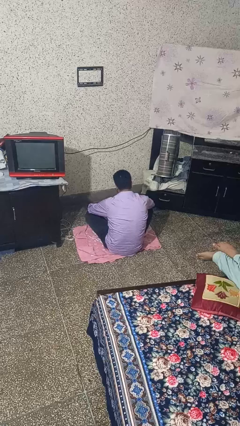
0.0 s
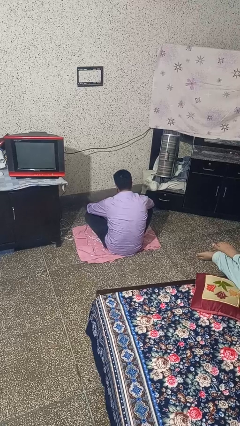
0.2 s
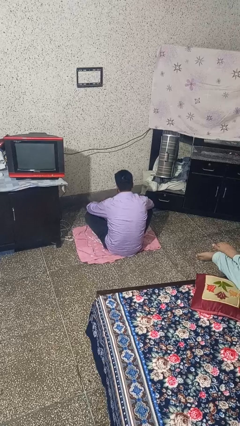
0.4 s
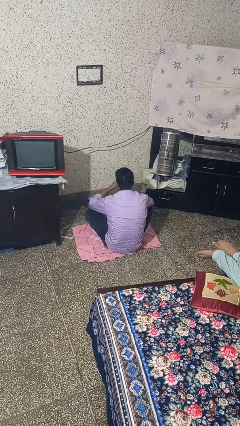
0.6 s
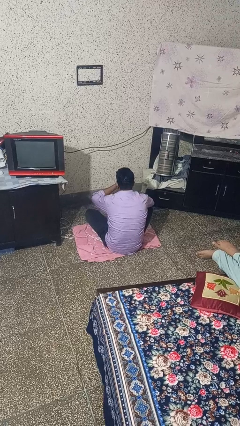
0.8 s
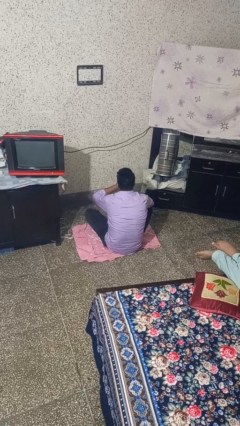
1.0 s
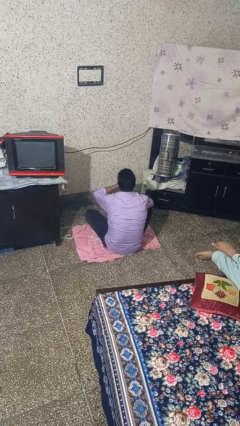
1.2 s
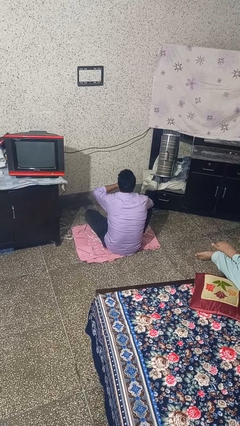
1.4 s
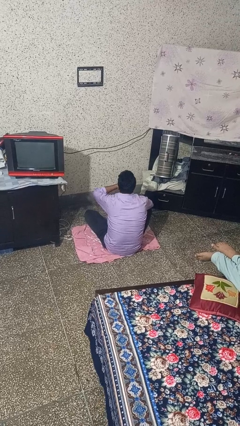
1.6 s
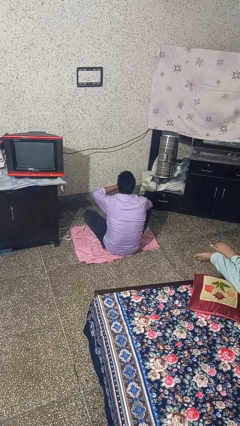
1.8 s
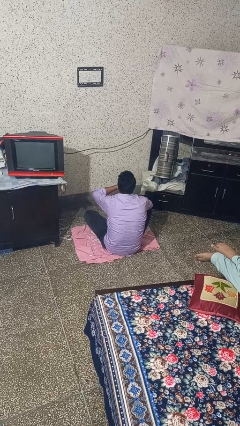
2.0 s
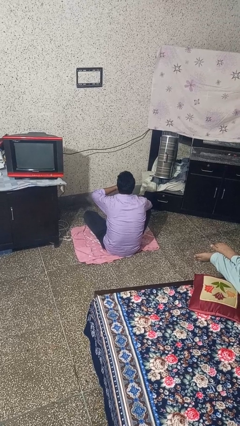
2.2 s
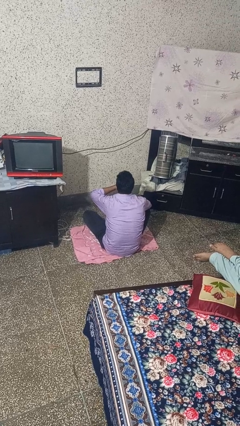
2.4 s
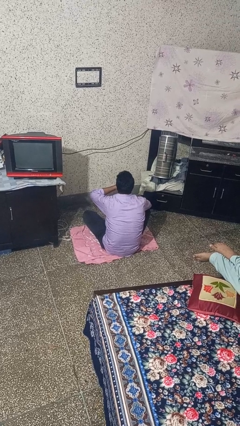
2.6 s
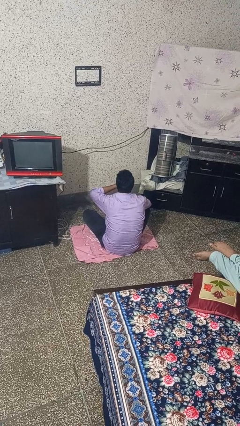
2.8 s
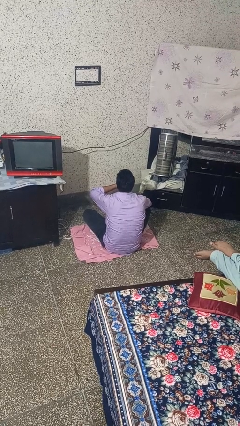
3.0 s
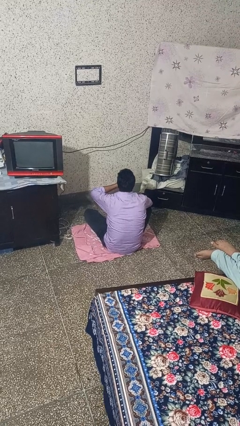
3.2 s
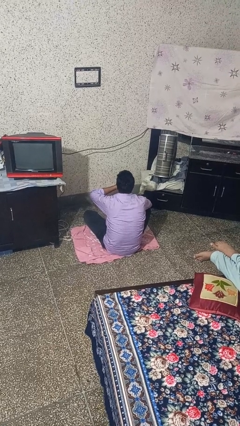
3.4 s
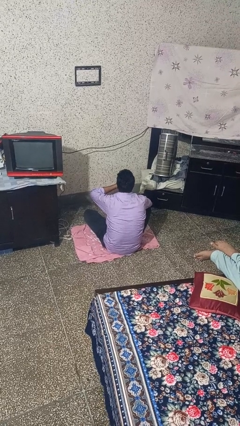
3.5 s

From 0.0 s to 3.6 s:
person yawns

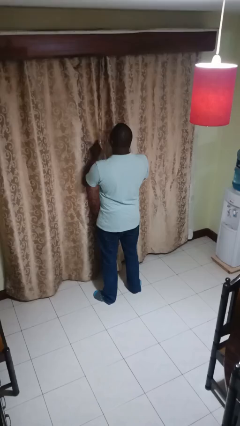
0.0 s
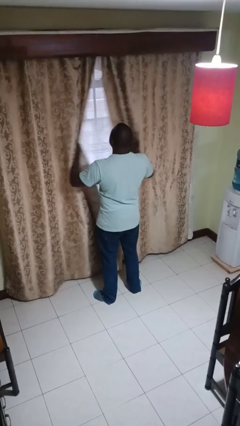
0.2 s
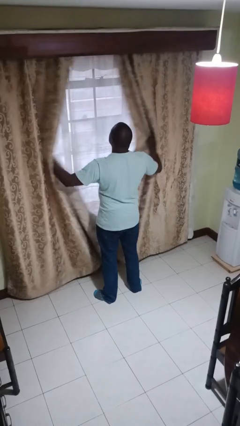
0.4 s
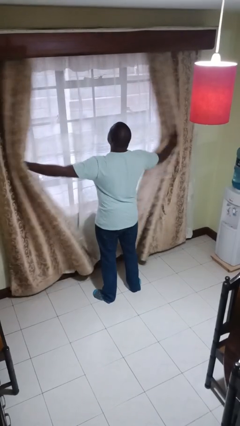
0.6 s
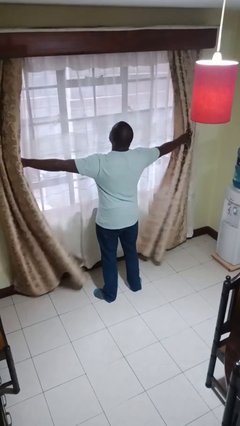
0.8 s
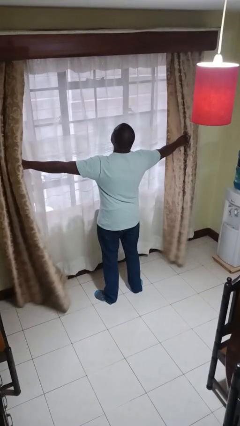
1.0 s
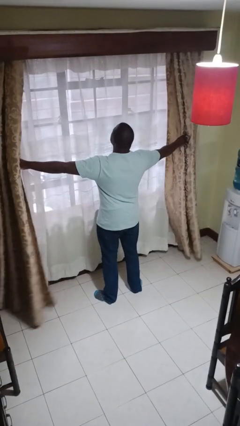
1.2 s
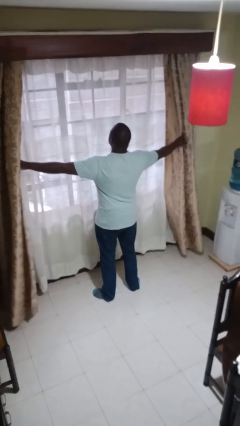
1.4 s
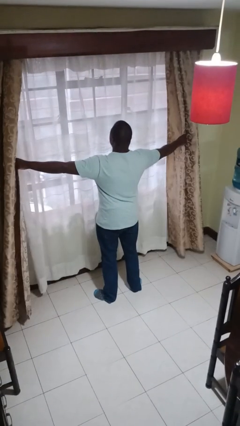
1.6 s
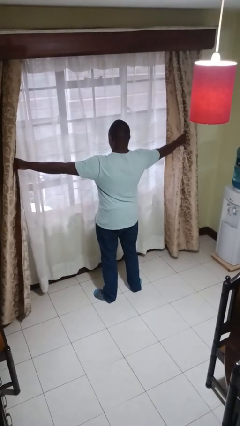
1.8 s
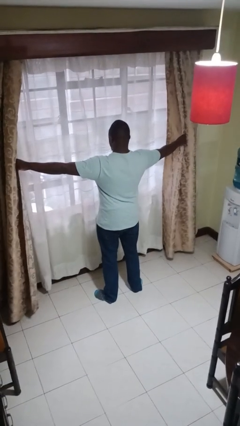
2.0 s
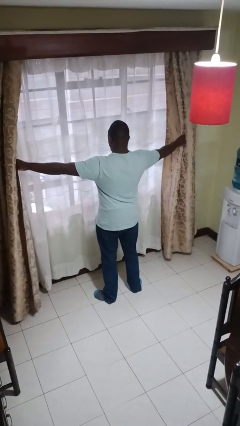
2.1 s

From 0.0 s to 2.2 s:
person opens curtains

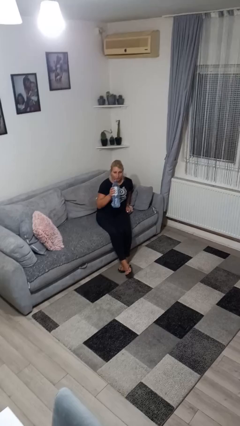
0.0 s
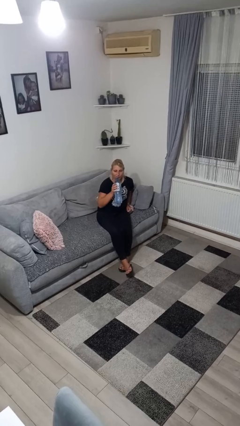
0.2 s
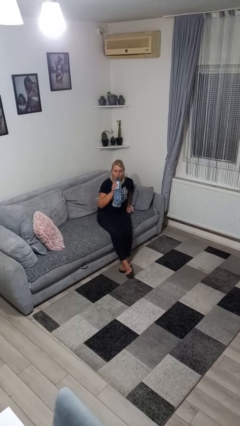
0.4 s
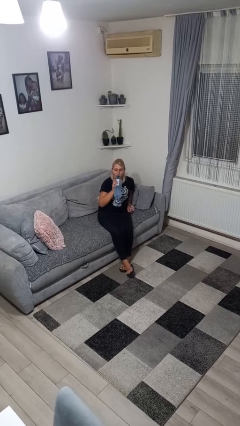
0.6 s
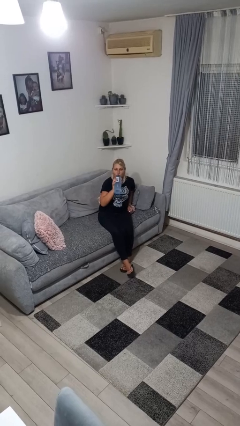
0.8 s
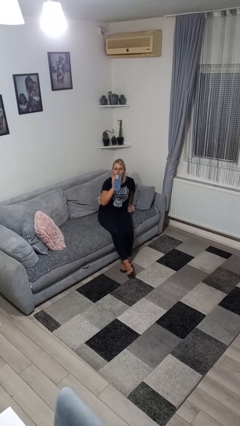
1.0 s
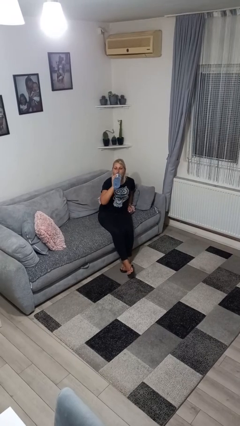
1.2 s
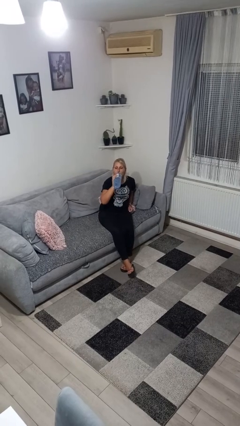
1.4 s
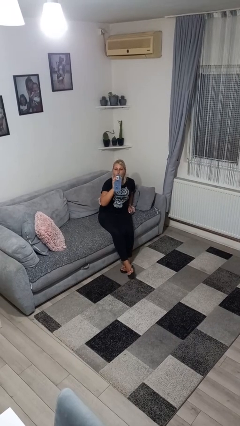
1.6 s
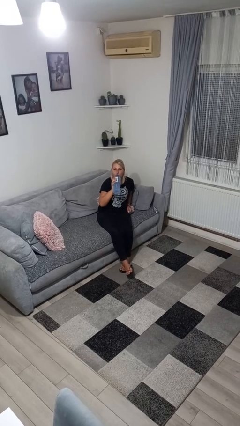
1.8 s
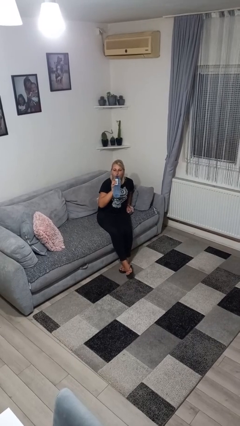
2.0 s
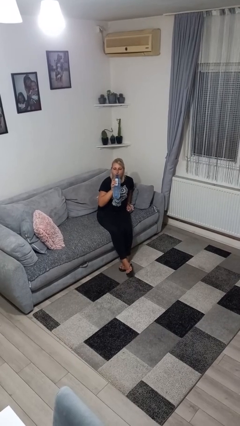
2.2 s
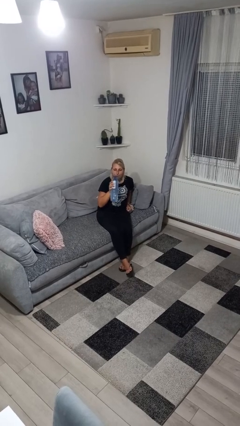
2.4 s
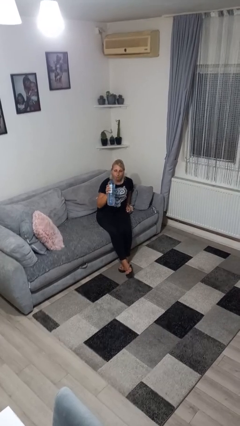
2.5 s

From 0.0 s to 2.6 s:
person drinks from bottle

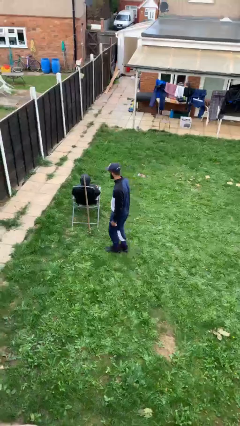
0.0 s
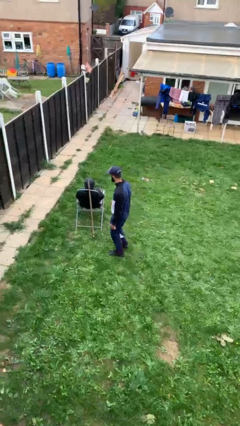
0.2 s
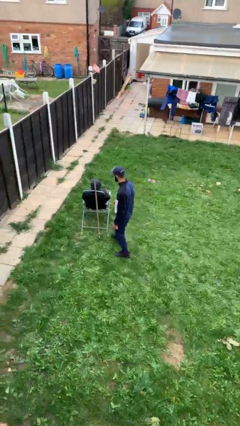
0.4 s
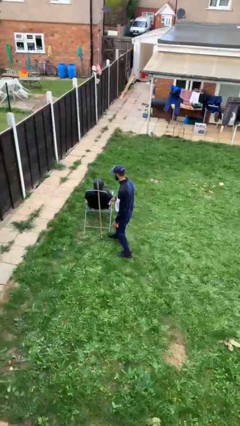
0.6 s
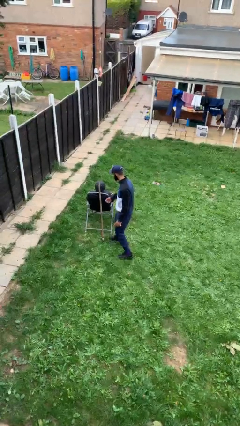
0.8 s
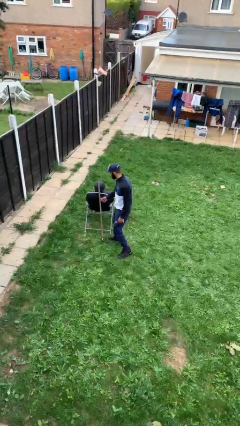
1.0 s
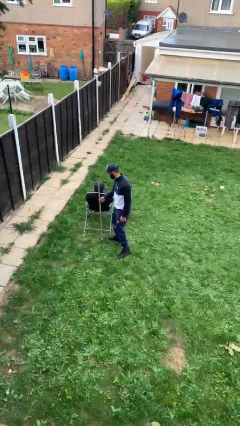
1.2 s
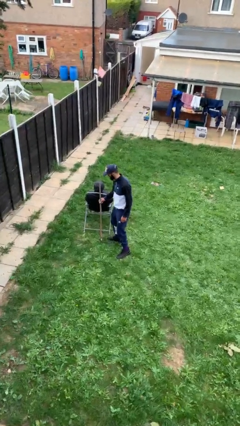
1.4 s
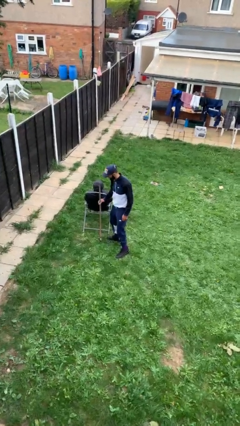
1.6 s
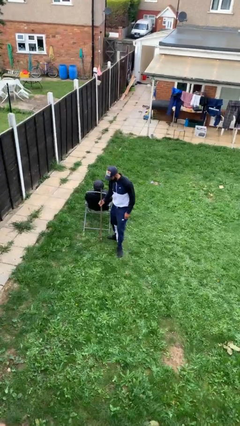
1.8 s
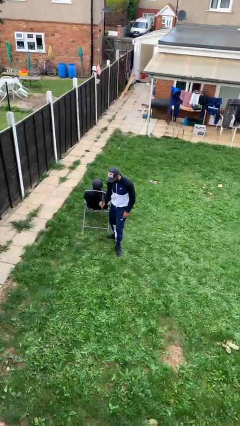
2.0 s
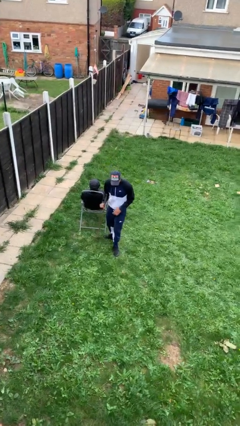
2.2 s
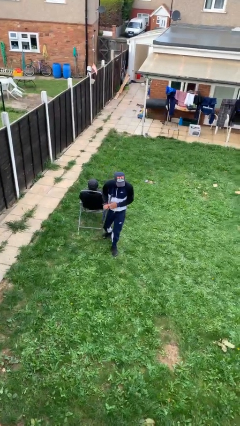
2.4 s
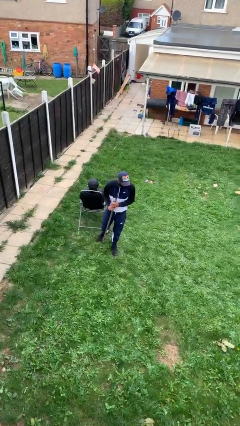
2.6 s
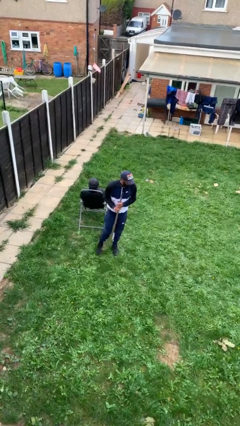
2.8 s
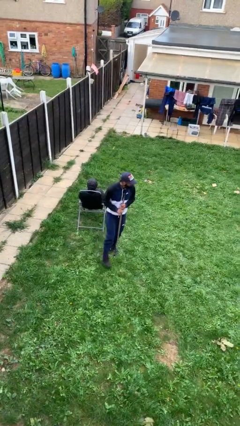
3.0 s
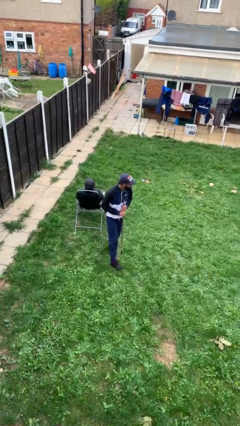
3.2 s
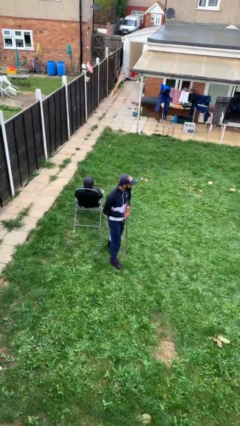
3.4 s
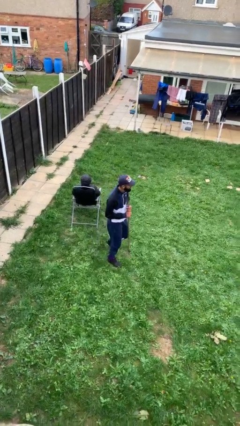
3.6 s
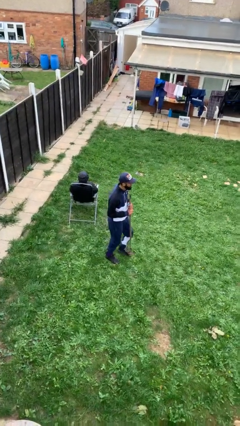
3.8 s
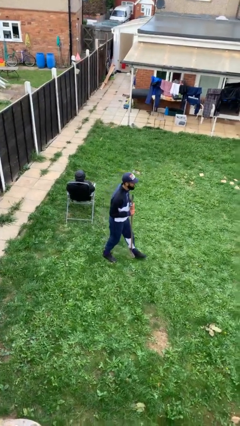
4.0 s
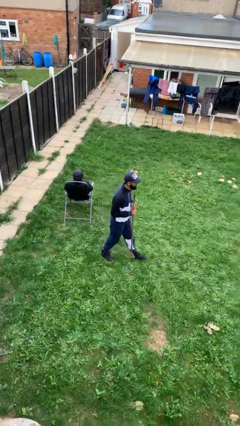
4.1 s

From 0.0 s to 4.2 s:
person steals object from person

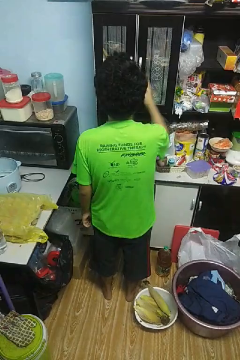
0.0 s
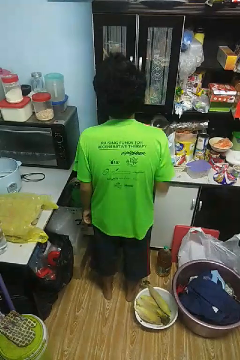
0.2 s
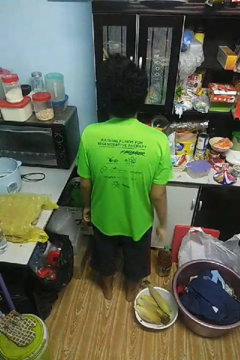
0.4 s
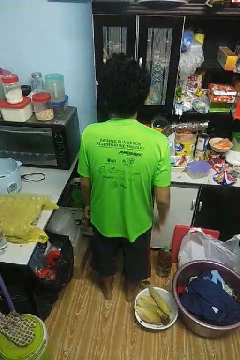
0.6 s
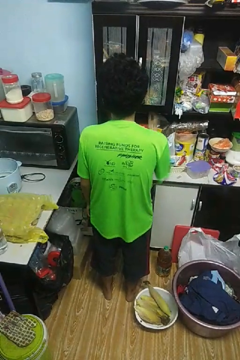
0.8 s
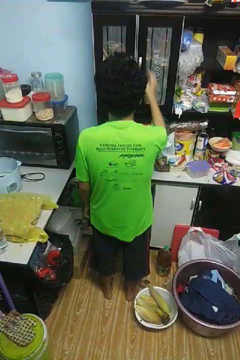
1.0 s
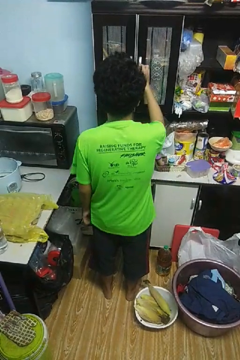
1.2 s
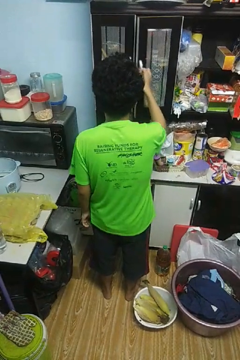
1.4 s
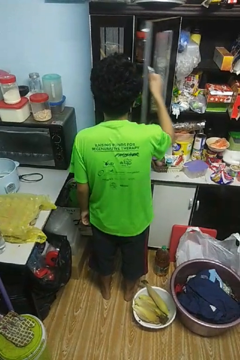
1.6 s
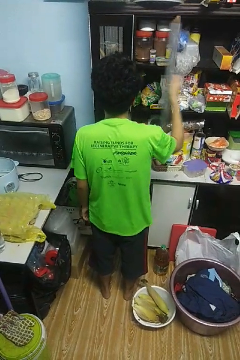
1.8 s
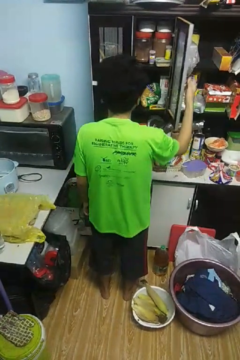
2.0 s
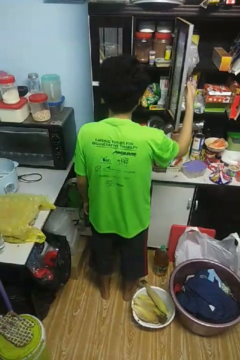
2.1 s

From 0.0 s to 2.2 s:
person opens cabinet

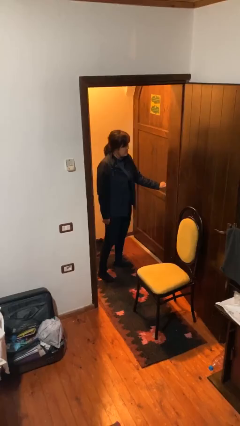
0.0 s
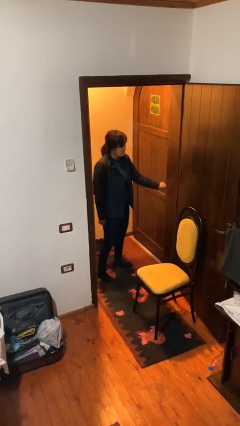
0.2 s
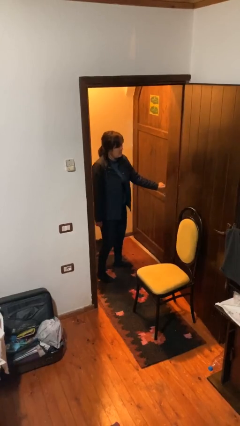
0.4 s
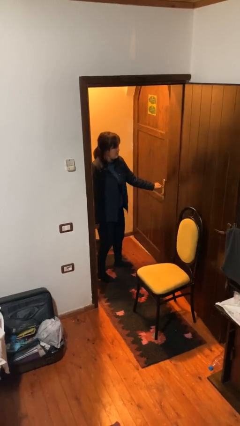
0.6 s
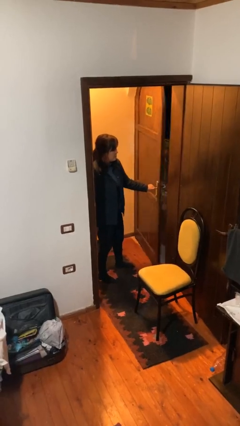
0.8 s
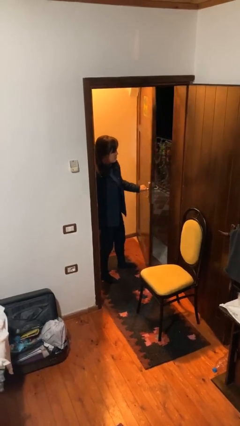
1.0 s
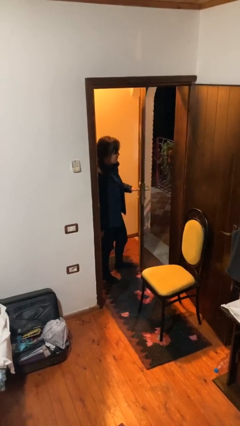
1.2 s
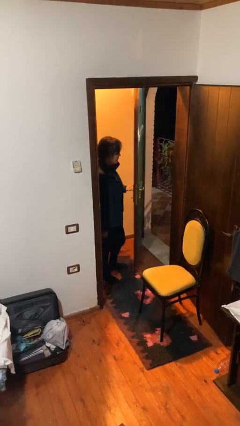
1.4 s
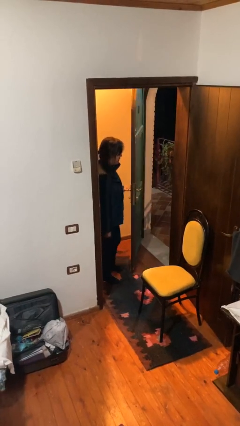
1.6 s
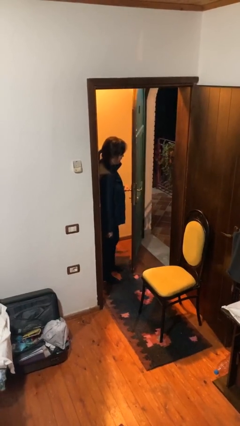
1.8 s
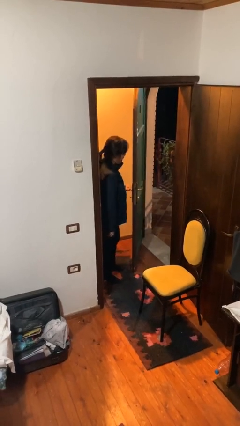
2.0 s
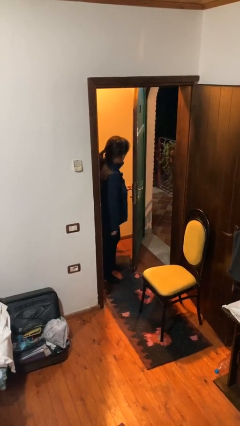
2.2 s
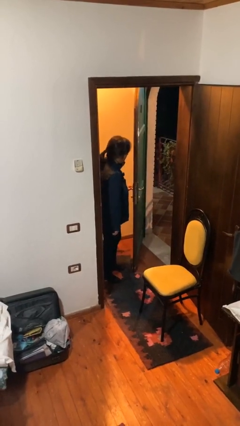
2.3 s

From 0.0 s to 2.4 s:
person opens facility door

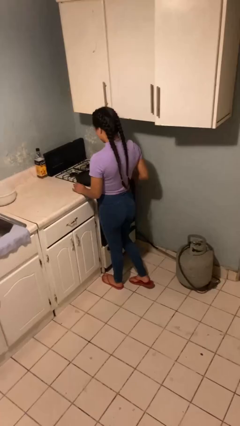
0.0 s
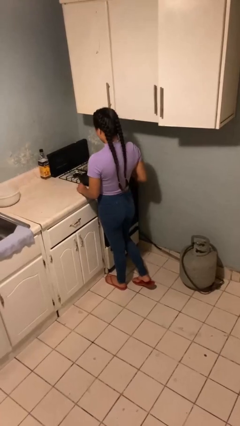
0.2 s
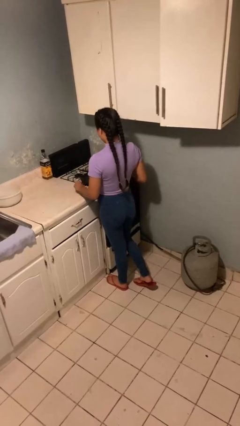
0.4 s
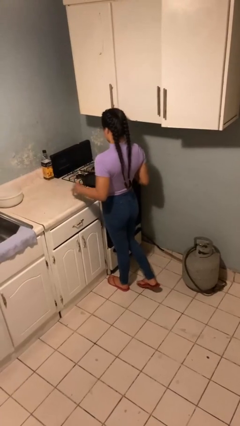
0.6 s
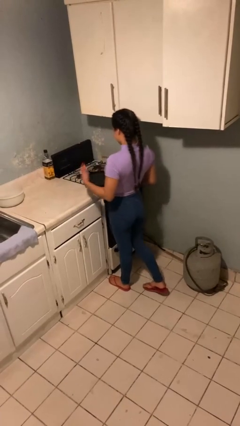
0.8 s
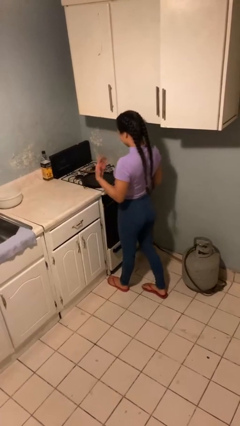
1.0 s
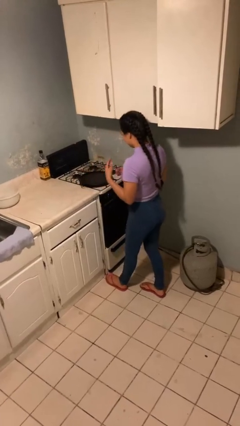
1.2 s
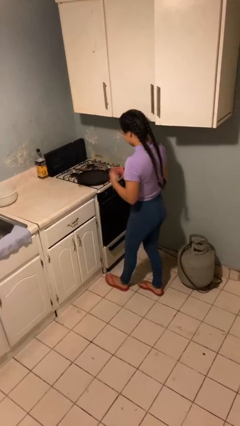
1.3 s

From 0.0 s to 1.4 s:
person burns hand
